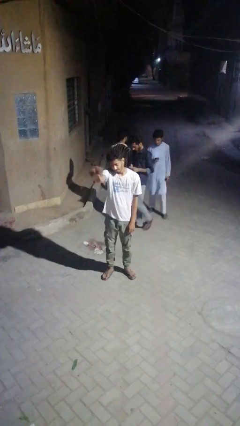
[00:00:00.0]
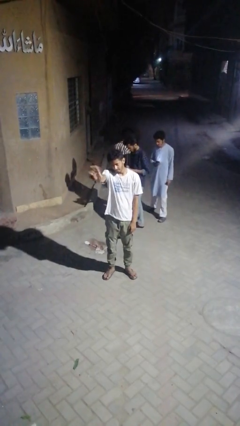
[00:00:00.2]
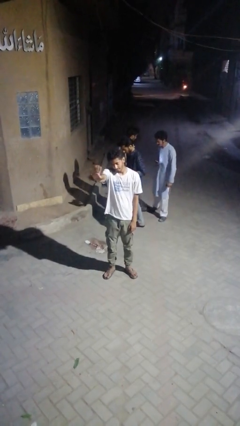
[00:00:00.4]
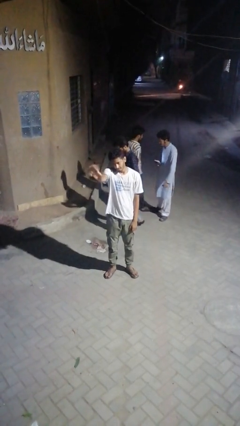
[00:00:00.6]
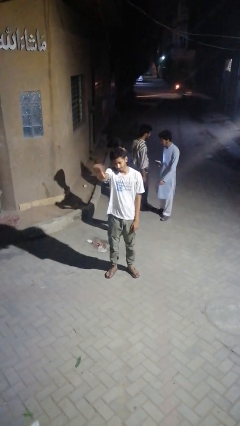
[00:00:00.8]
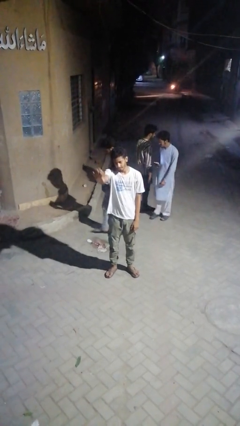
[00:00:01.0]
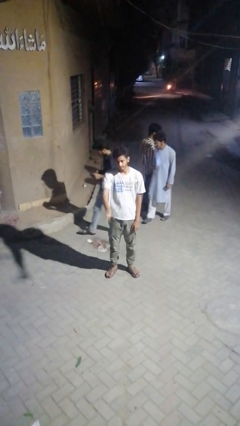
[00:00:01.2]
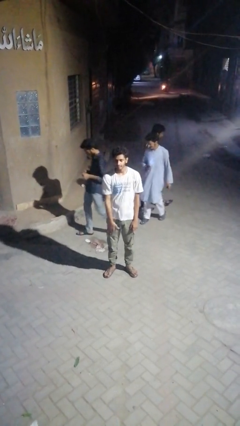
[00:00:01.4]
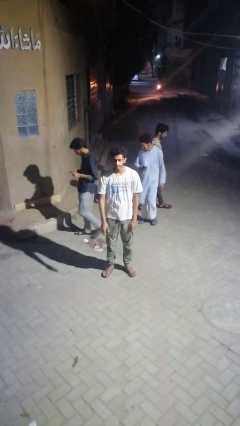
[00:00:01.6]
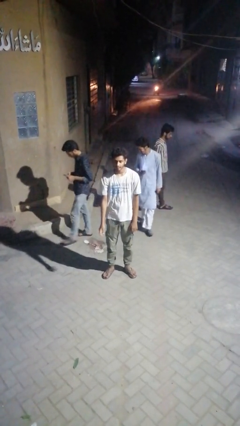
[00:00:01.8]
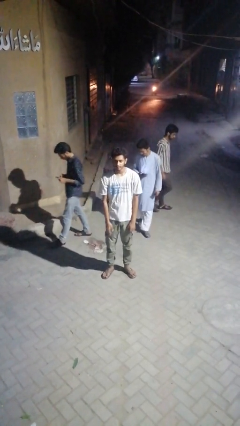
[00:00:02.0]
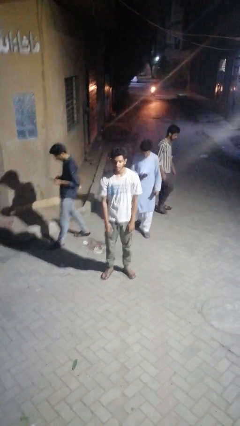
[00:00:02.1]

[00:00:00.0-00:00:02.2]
person waves at person

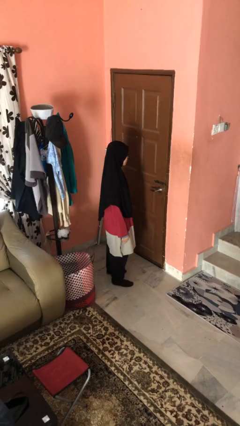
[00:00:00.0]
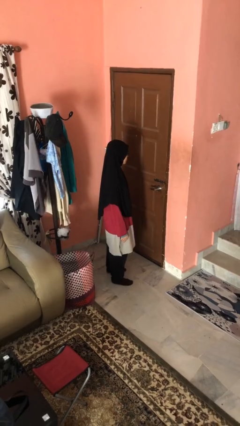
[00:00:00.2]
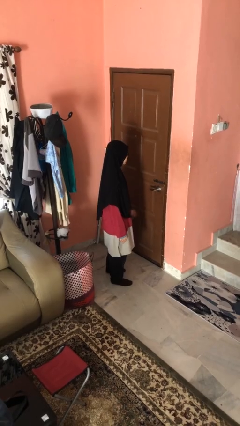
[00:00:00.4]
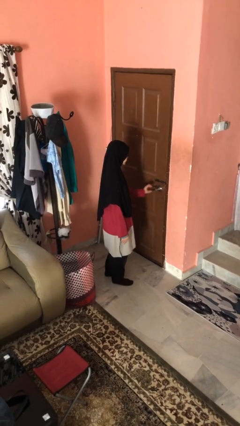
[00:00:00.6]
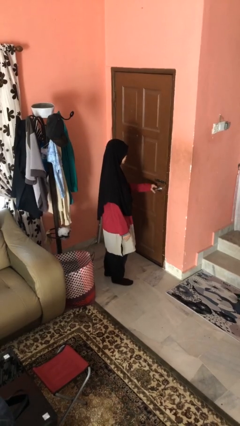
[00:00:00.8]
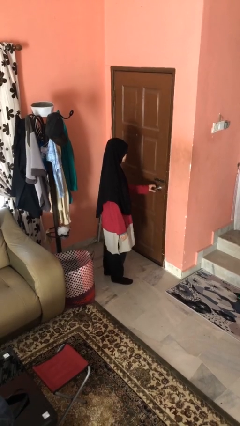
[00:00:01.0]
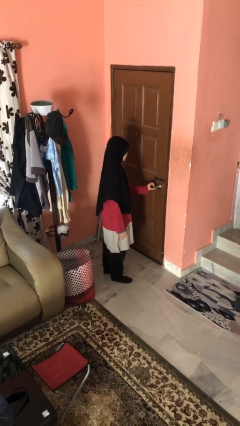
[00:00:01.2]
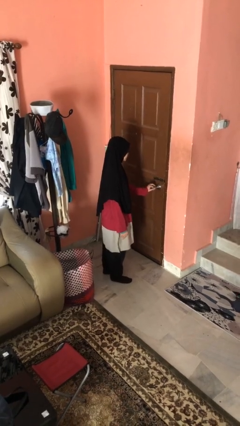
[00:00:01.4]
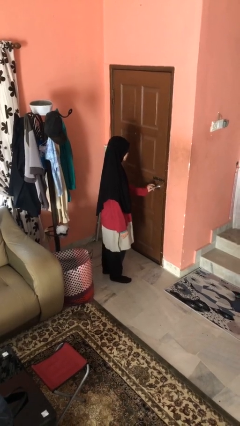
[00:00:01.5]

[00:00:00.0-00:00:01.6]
person unlocks door with keys

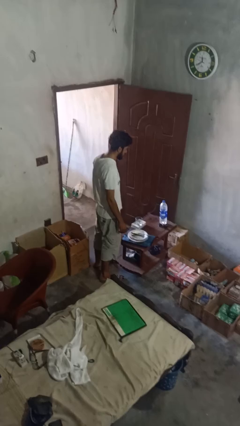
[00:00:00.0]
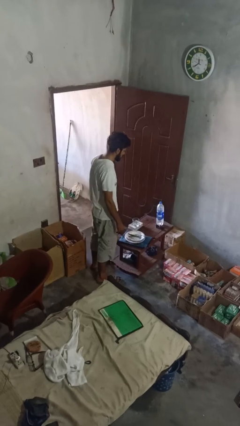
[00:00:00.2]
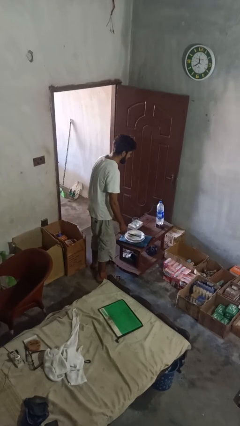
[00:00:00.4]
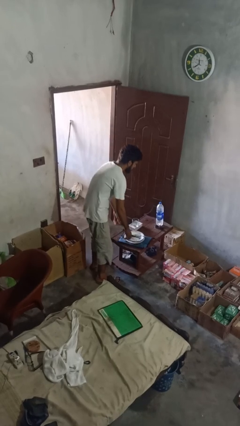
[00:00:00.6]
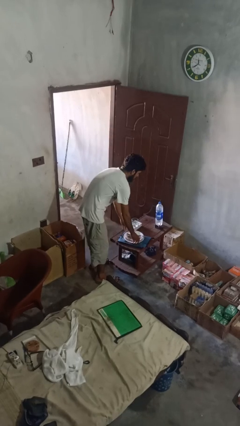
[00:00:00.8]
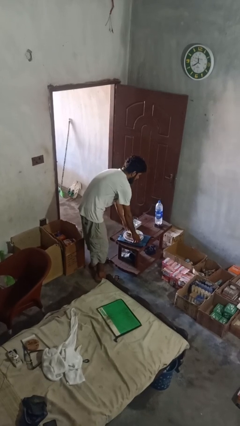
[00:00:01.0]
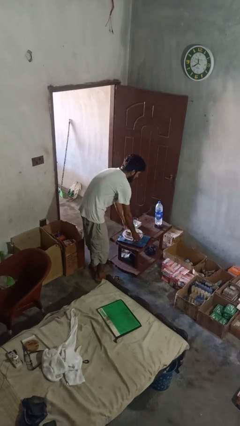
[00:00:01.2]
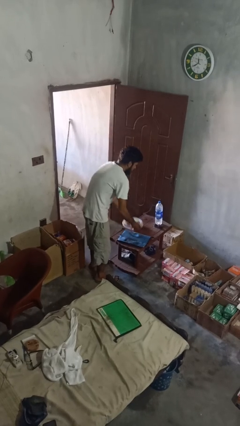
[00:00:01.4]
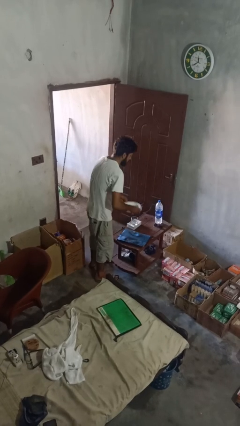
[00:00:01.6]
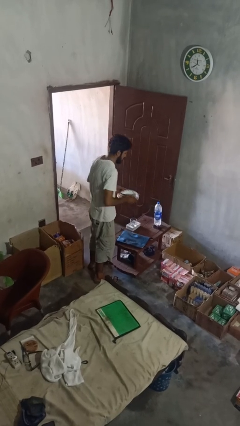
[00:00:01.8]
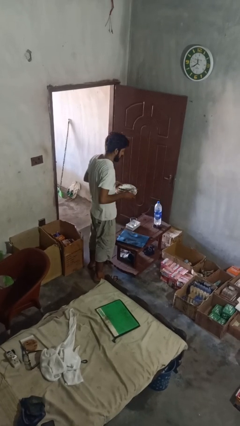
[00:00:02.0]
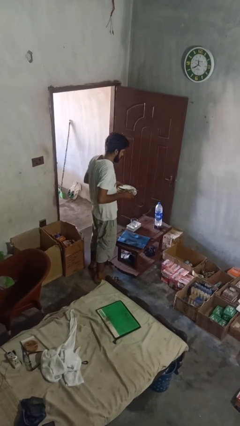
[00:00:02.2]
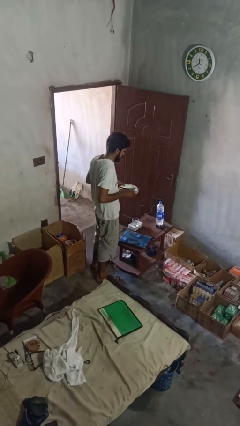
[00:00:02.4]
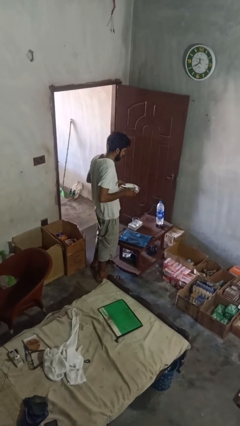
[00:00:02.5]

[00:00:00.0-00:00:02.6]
person picks up object from countertop

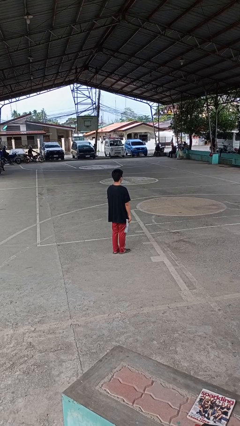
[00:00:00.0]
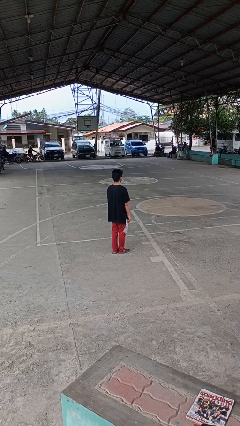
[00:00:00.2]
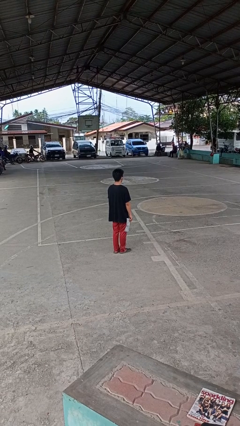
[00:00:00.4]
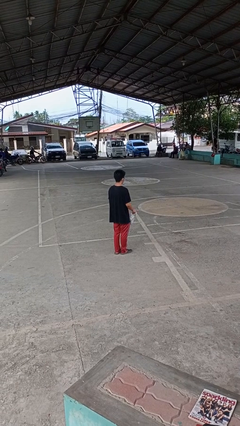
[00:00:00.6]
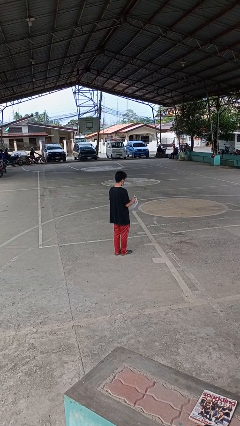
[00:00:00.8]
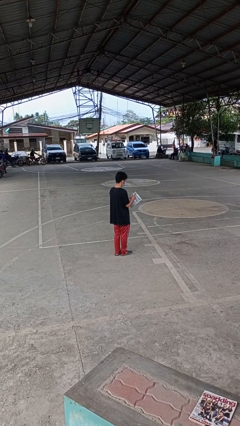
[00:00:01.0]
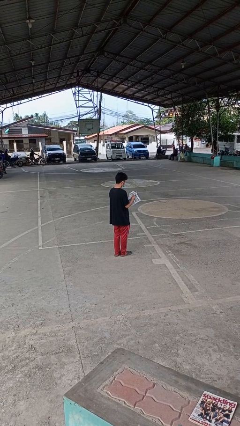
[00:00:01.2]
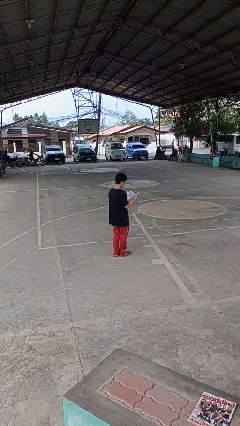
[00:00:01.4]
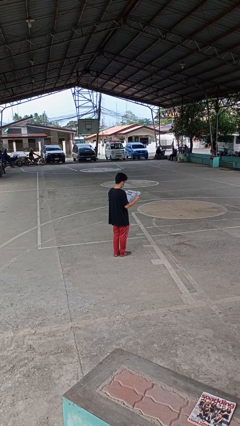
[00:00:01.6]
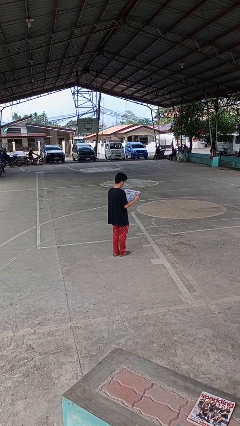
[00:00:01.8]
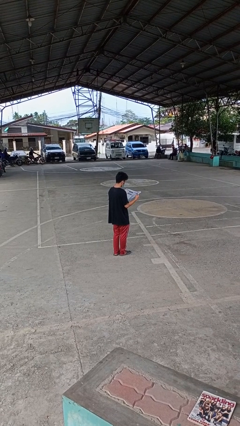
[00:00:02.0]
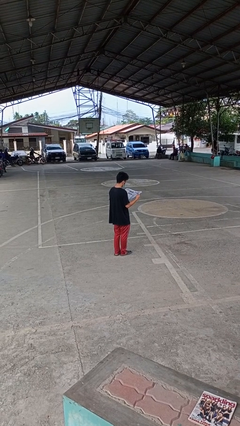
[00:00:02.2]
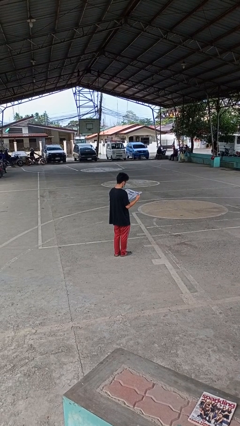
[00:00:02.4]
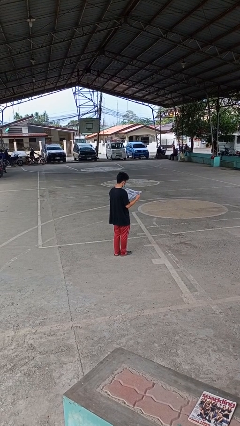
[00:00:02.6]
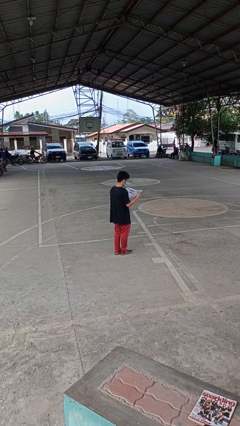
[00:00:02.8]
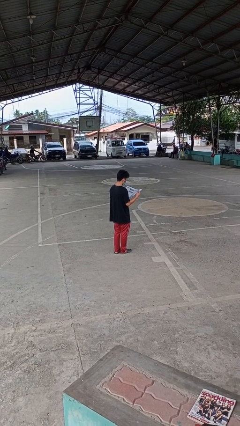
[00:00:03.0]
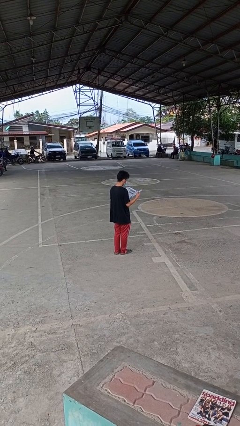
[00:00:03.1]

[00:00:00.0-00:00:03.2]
person reads newspaper

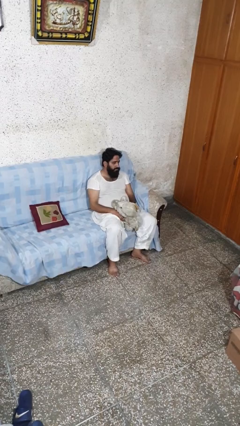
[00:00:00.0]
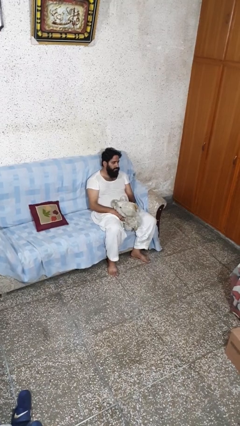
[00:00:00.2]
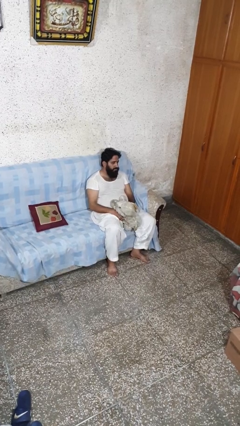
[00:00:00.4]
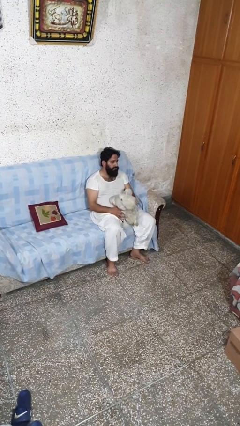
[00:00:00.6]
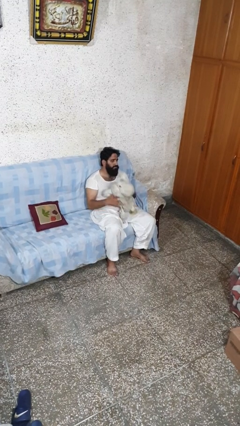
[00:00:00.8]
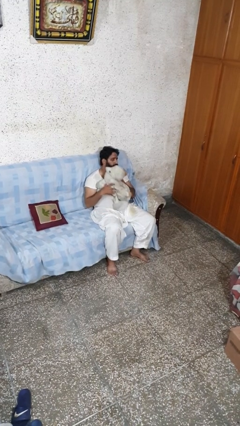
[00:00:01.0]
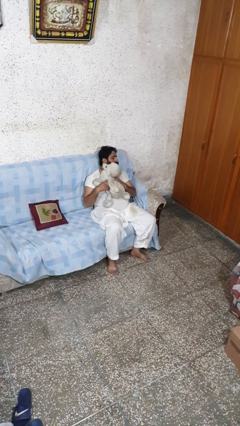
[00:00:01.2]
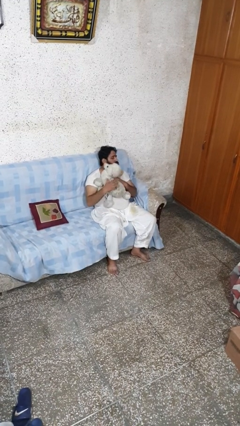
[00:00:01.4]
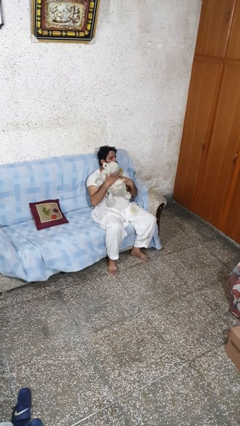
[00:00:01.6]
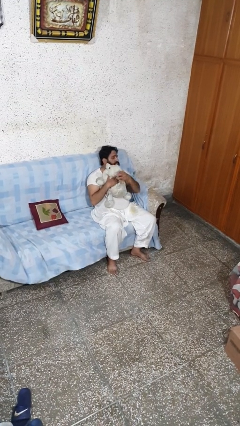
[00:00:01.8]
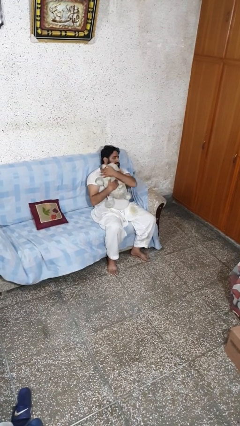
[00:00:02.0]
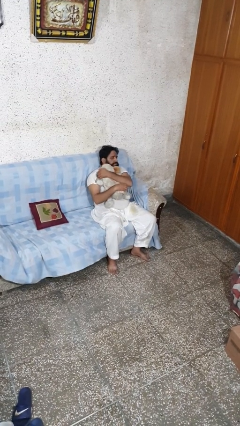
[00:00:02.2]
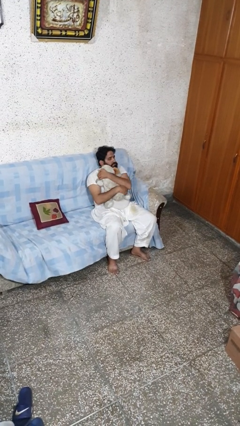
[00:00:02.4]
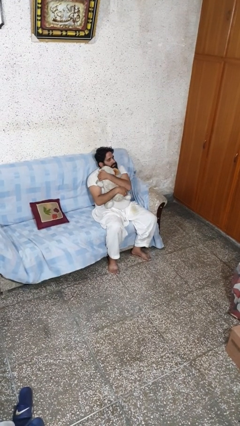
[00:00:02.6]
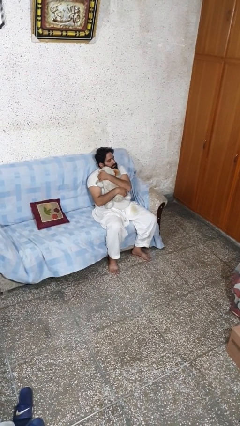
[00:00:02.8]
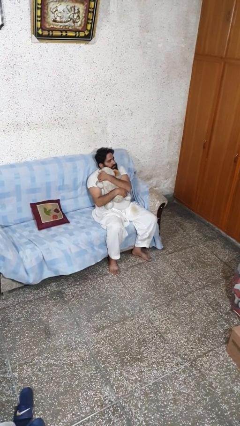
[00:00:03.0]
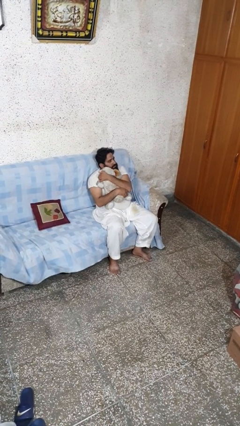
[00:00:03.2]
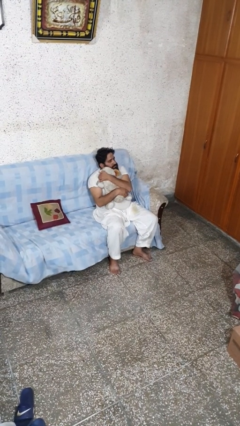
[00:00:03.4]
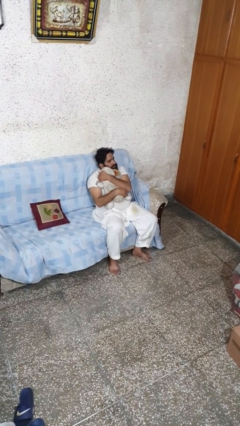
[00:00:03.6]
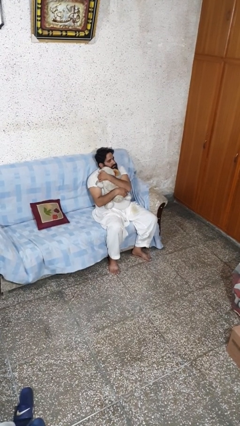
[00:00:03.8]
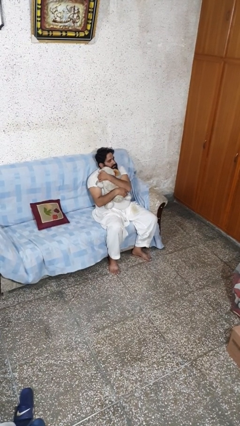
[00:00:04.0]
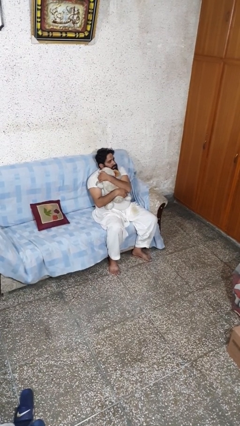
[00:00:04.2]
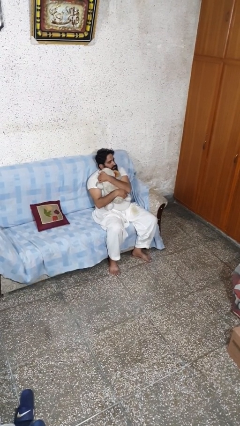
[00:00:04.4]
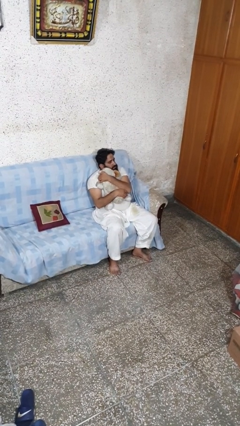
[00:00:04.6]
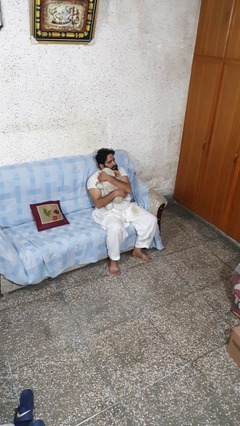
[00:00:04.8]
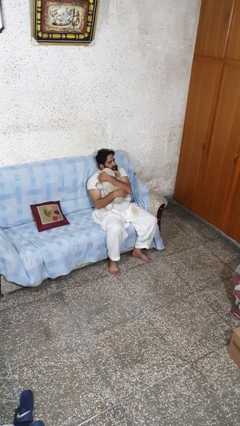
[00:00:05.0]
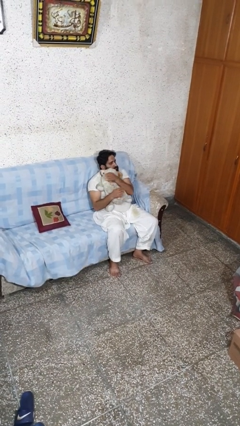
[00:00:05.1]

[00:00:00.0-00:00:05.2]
person hugs stuffed animal

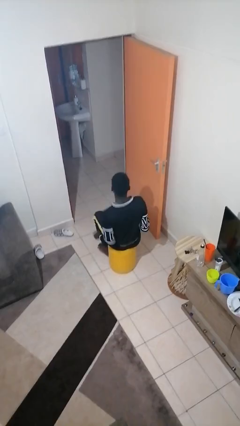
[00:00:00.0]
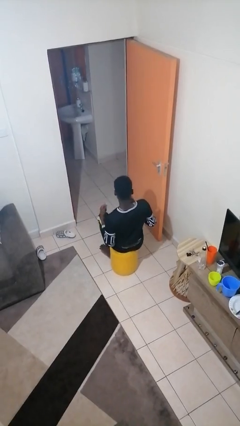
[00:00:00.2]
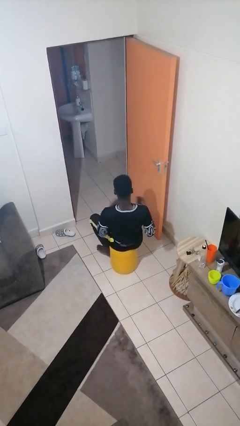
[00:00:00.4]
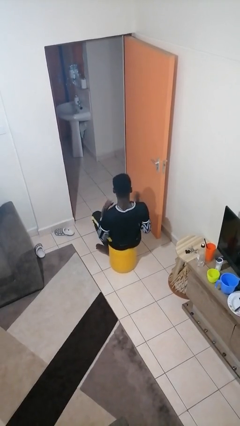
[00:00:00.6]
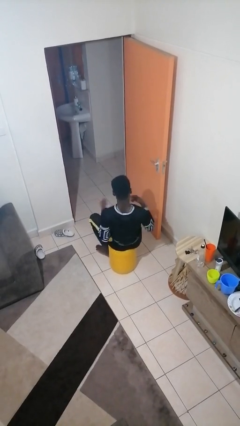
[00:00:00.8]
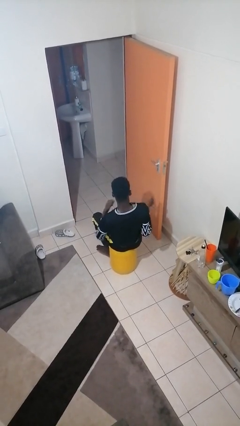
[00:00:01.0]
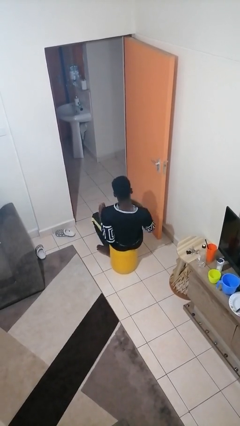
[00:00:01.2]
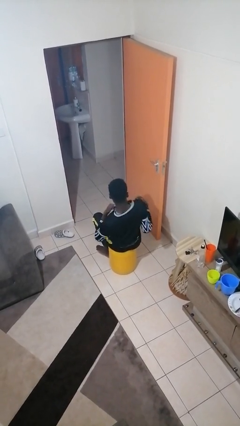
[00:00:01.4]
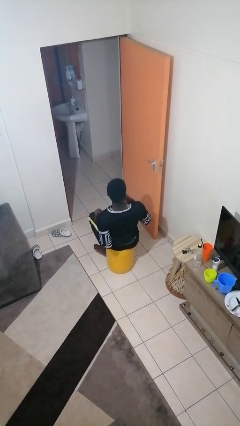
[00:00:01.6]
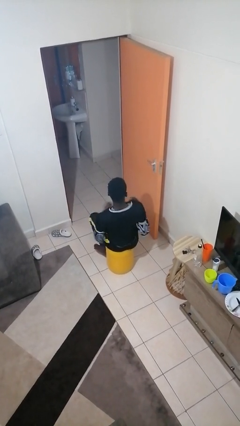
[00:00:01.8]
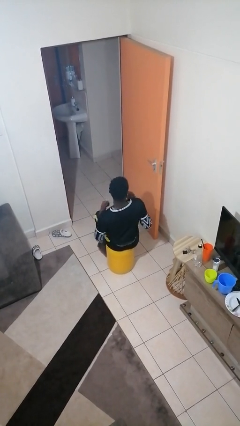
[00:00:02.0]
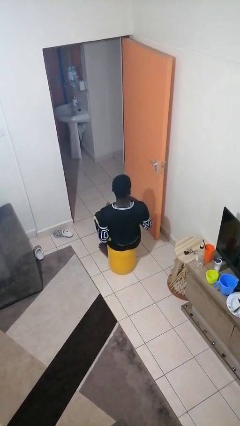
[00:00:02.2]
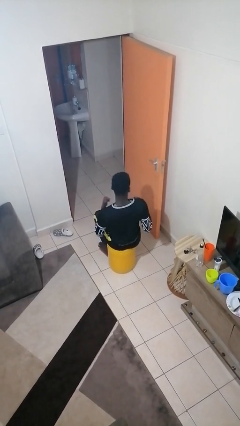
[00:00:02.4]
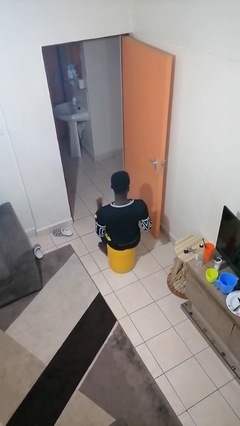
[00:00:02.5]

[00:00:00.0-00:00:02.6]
person drums on chest
